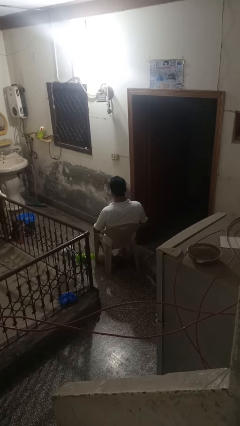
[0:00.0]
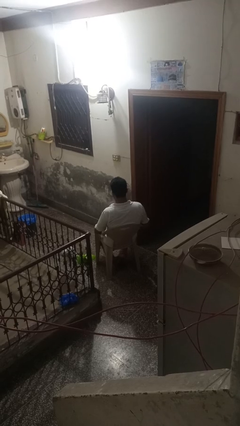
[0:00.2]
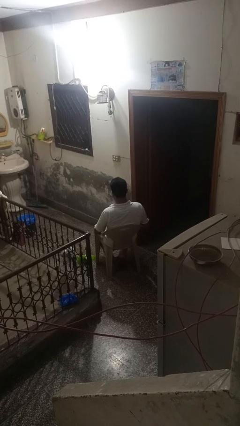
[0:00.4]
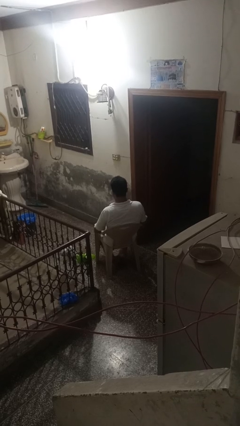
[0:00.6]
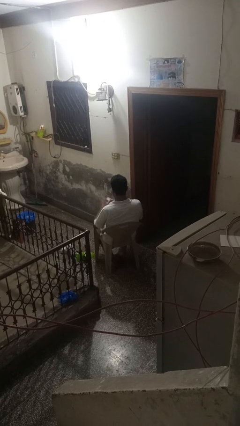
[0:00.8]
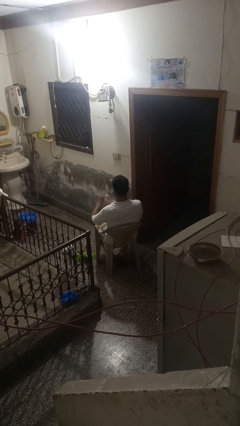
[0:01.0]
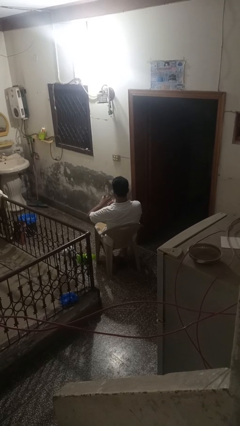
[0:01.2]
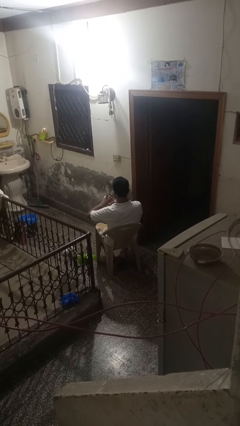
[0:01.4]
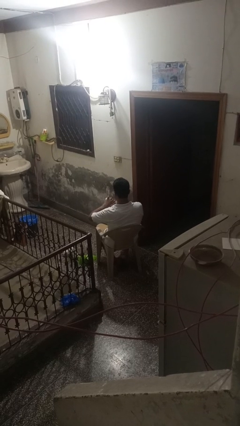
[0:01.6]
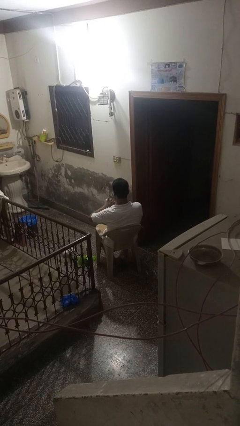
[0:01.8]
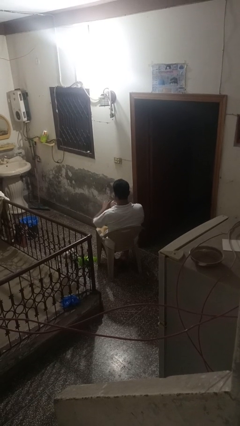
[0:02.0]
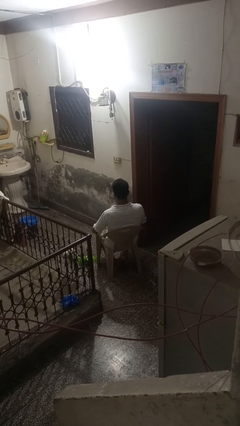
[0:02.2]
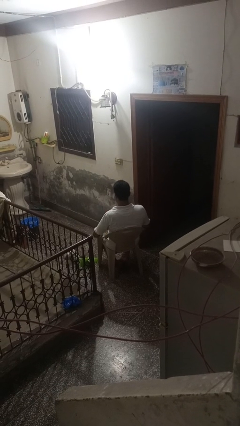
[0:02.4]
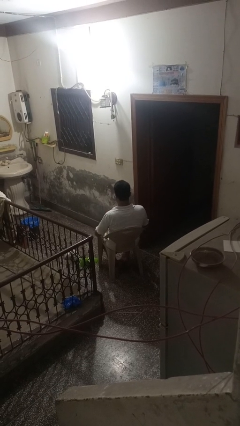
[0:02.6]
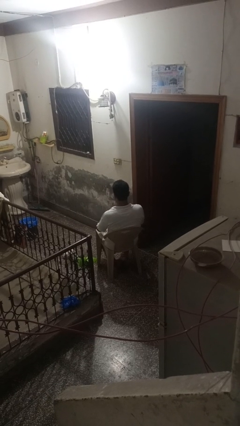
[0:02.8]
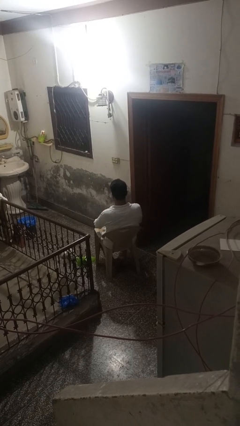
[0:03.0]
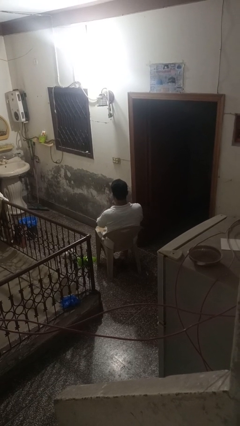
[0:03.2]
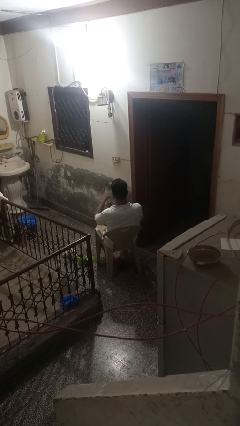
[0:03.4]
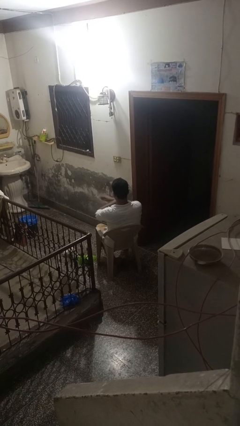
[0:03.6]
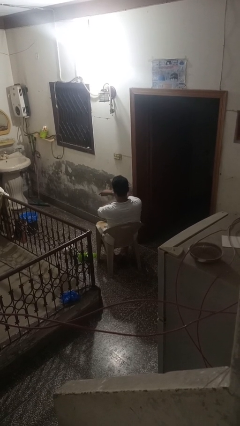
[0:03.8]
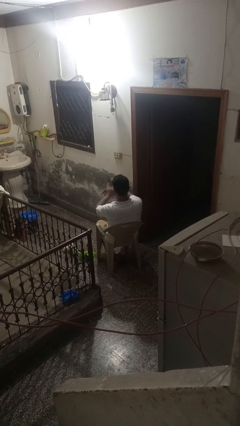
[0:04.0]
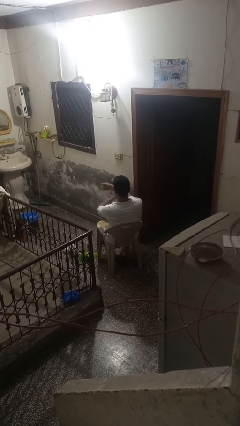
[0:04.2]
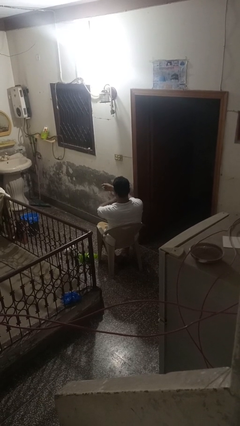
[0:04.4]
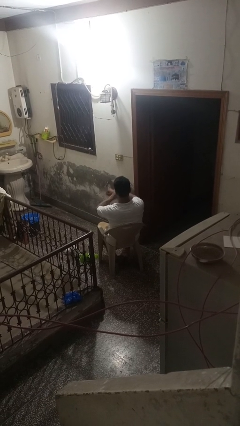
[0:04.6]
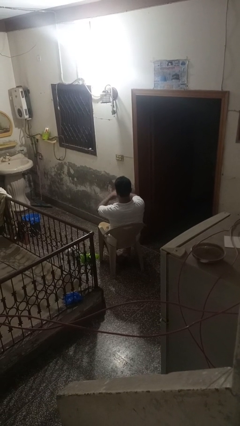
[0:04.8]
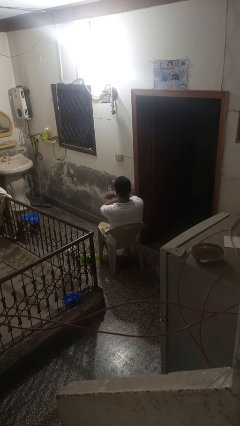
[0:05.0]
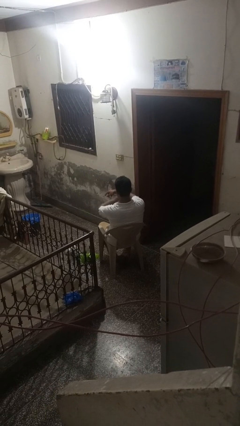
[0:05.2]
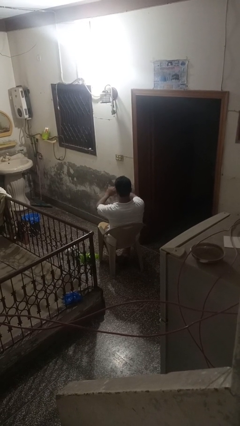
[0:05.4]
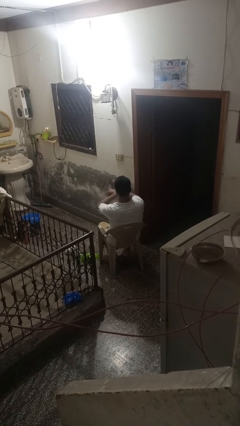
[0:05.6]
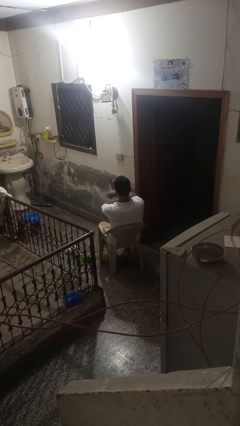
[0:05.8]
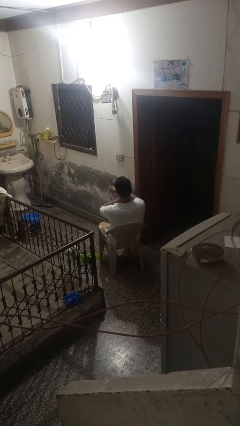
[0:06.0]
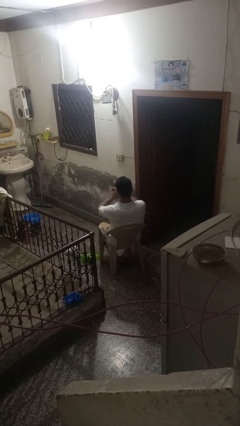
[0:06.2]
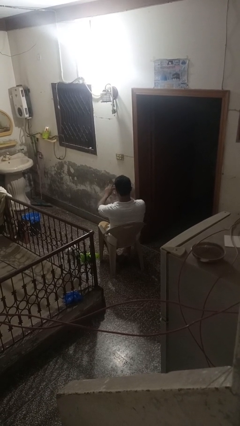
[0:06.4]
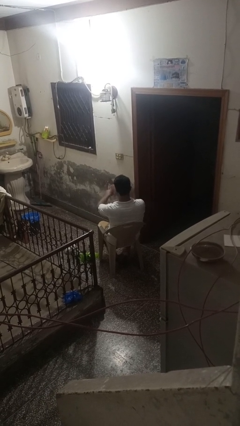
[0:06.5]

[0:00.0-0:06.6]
person applies sunscreen

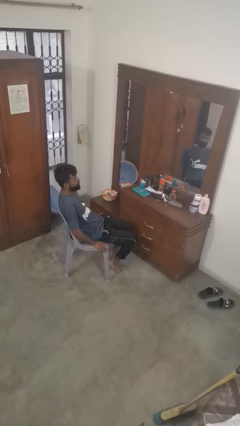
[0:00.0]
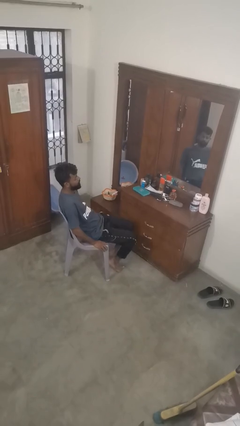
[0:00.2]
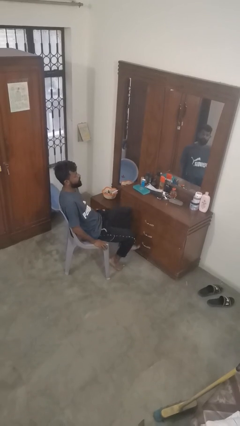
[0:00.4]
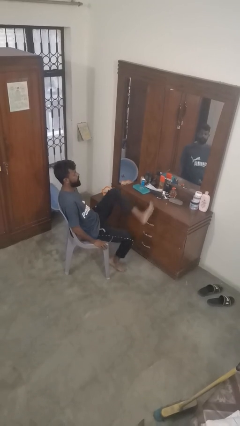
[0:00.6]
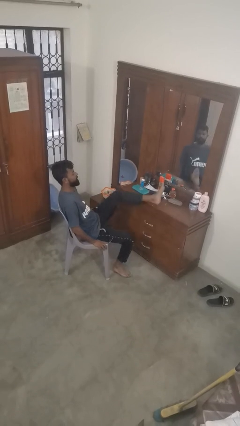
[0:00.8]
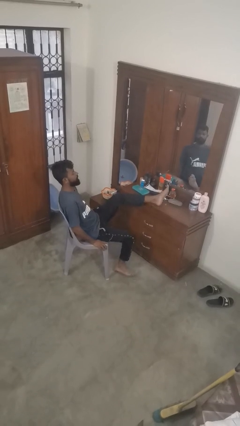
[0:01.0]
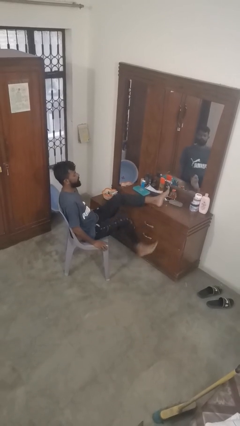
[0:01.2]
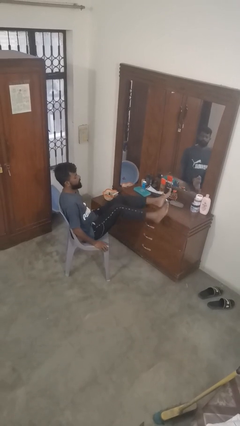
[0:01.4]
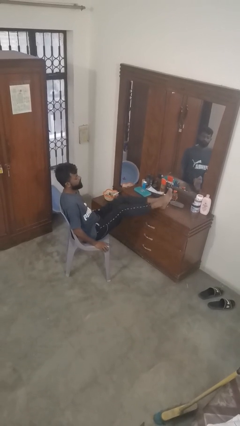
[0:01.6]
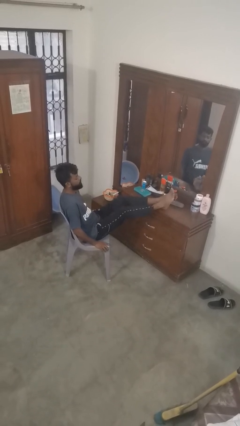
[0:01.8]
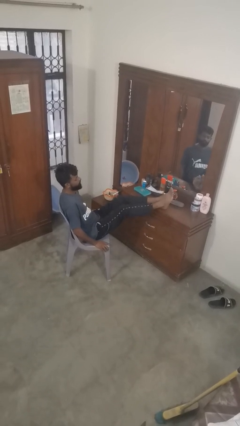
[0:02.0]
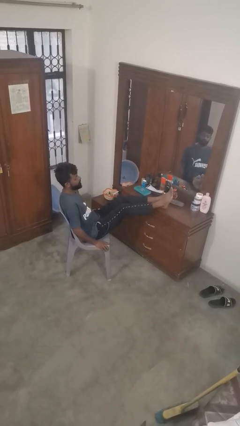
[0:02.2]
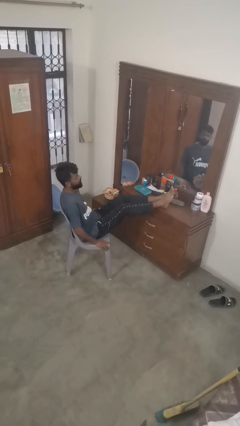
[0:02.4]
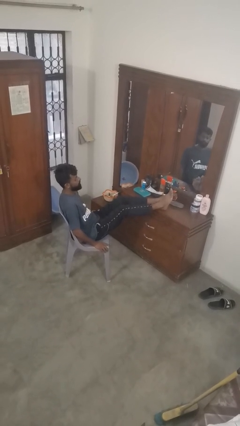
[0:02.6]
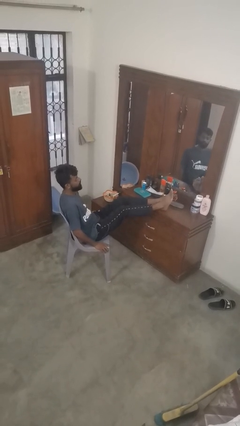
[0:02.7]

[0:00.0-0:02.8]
person puts feet up

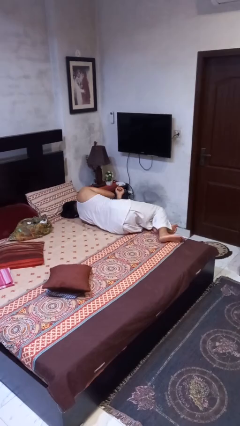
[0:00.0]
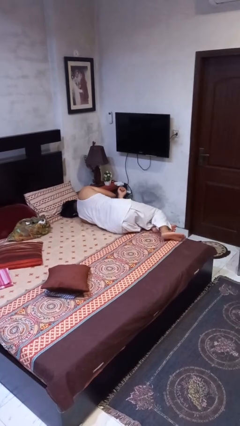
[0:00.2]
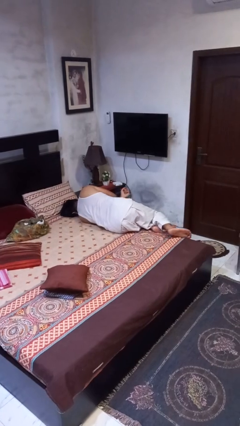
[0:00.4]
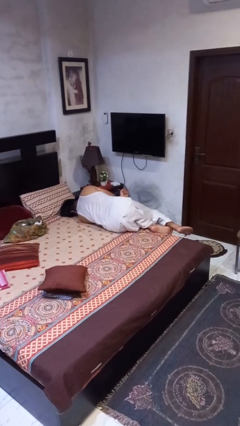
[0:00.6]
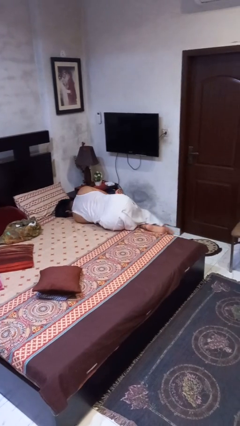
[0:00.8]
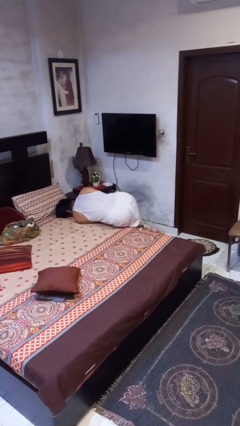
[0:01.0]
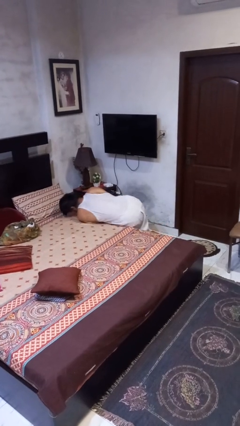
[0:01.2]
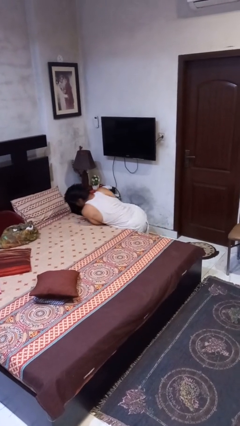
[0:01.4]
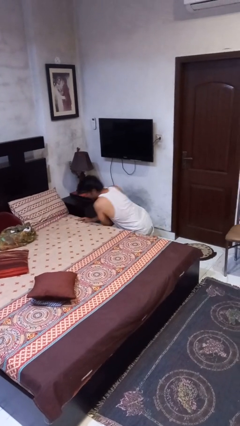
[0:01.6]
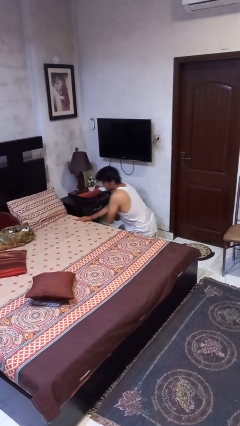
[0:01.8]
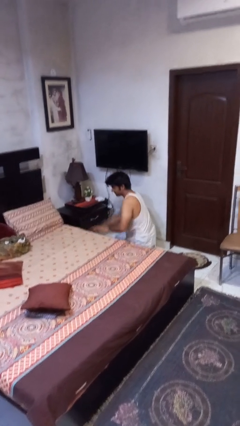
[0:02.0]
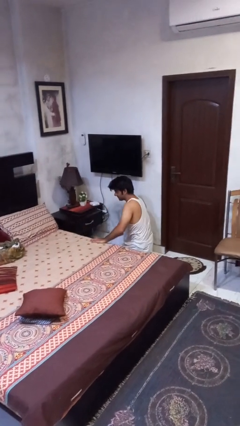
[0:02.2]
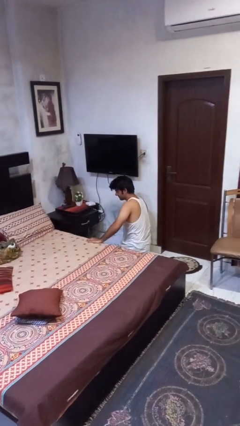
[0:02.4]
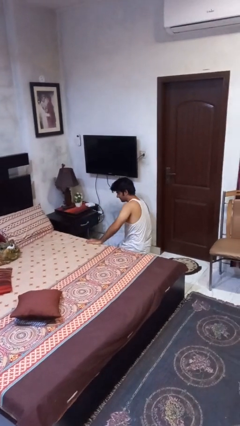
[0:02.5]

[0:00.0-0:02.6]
person falls from bed

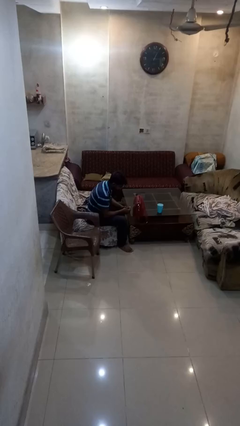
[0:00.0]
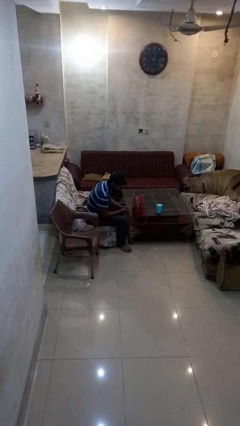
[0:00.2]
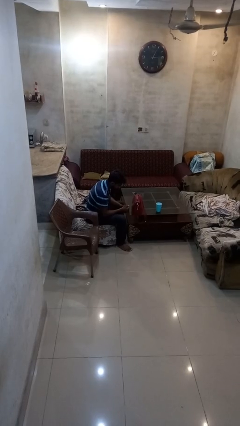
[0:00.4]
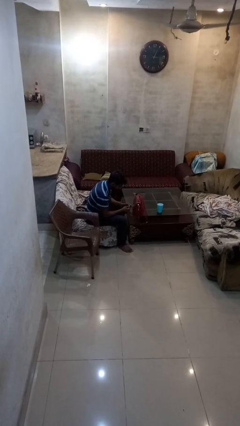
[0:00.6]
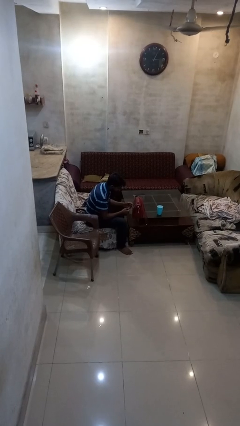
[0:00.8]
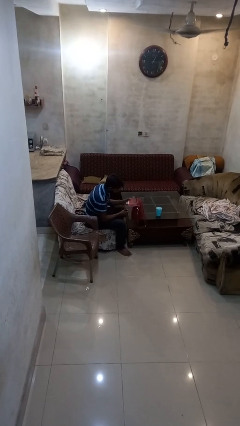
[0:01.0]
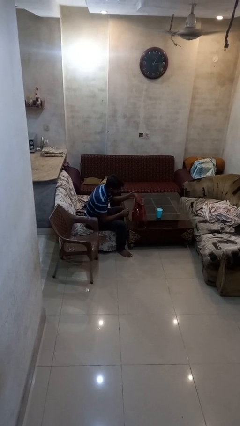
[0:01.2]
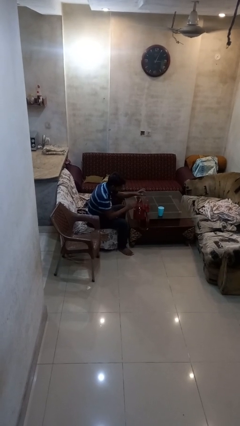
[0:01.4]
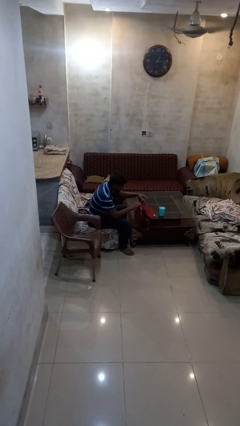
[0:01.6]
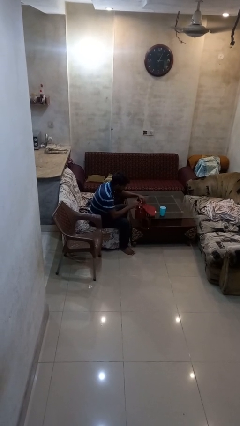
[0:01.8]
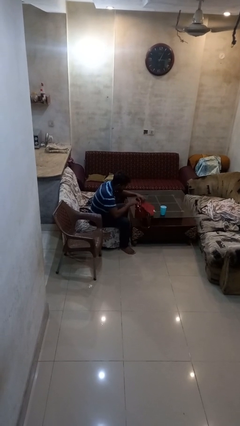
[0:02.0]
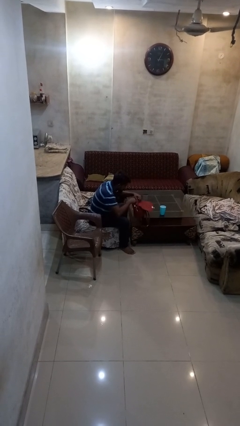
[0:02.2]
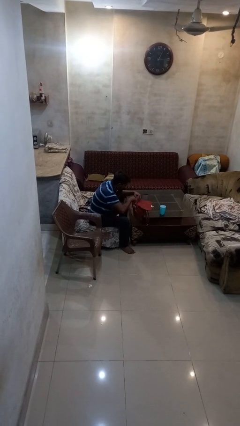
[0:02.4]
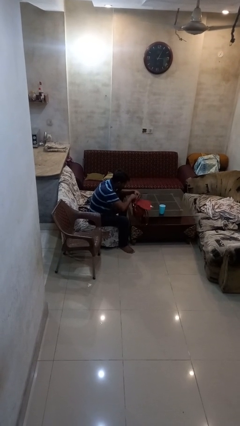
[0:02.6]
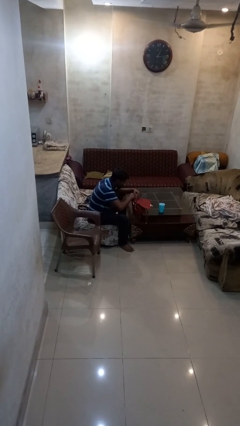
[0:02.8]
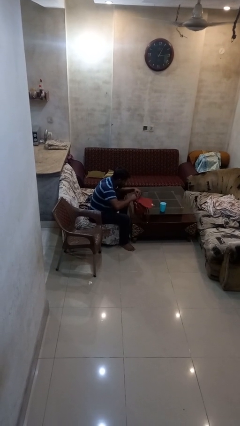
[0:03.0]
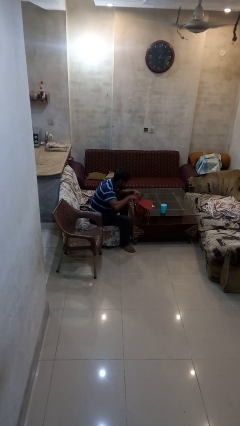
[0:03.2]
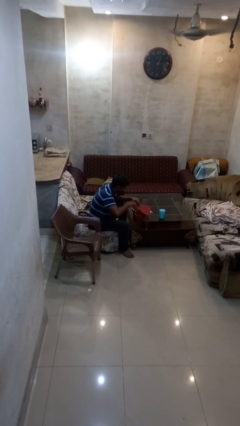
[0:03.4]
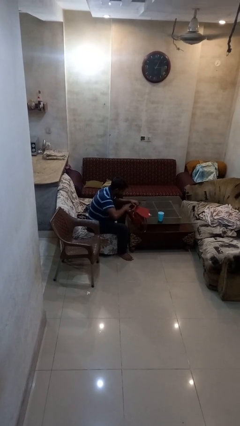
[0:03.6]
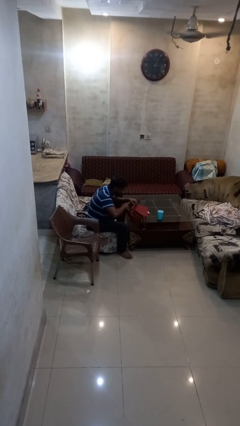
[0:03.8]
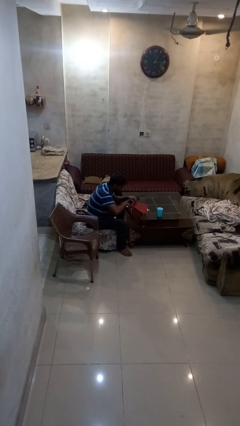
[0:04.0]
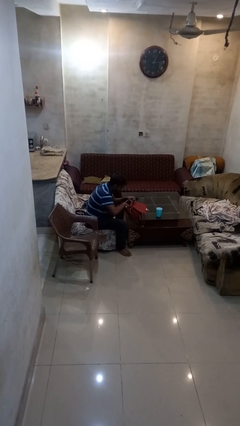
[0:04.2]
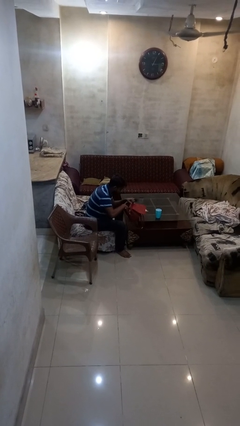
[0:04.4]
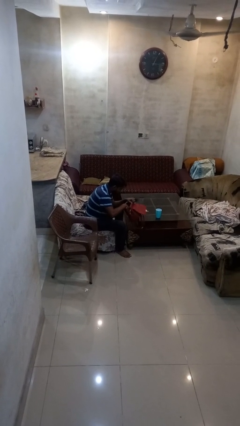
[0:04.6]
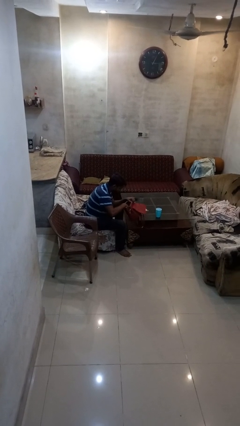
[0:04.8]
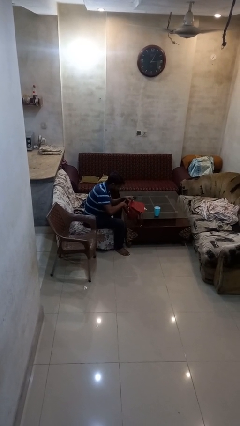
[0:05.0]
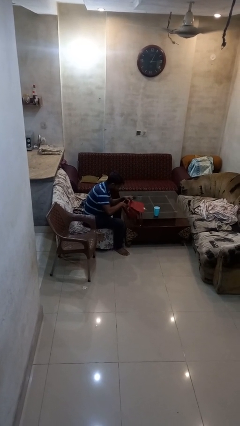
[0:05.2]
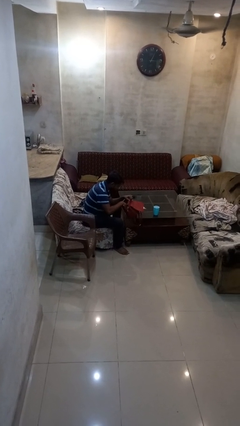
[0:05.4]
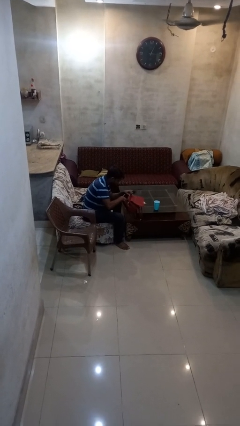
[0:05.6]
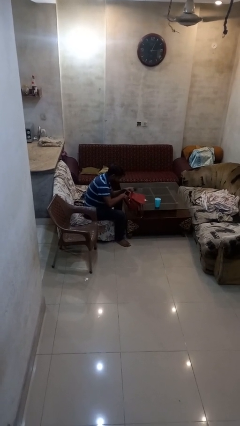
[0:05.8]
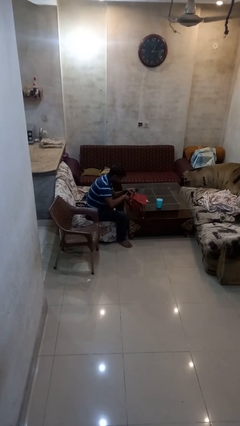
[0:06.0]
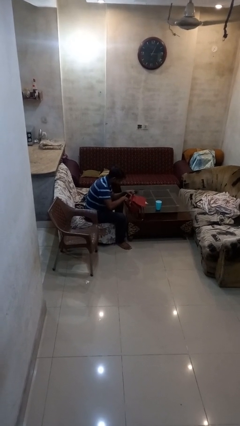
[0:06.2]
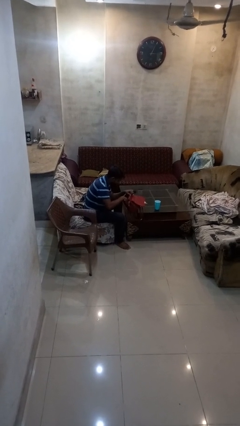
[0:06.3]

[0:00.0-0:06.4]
person searches in purse
